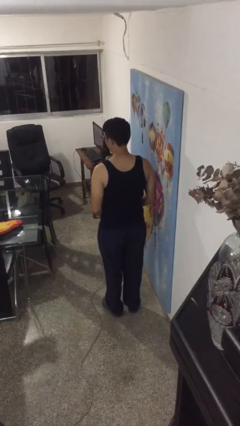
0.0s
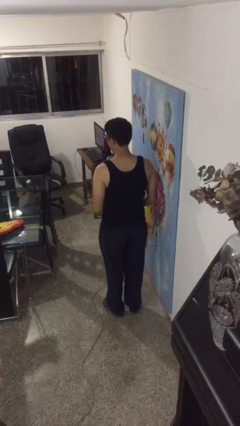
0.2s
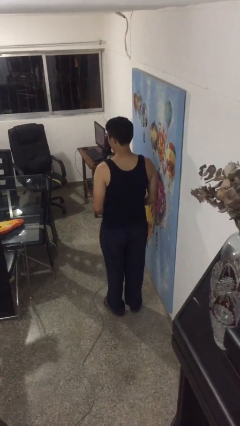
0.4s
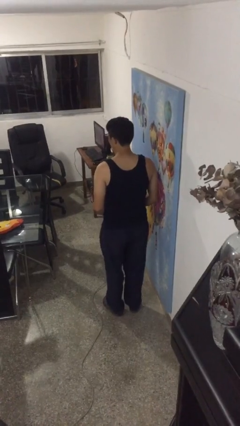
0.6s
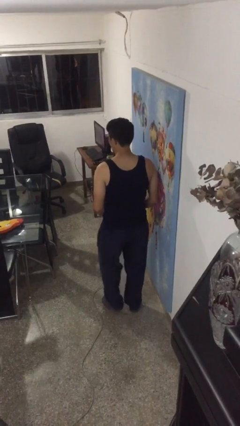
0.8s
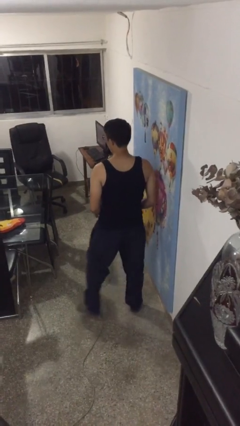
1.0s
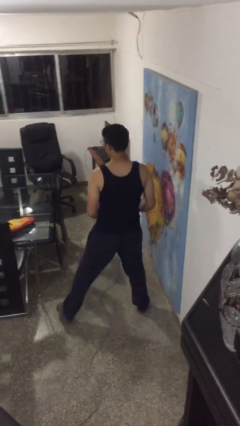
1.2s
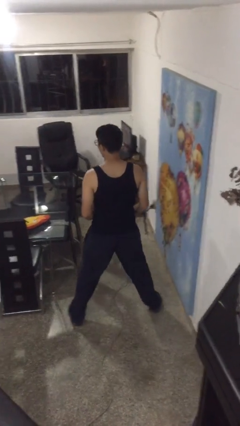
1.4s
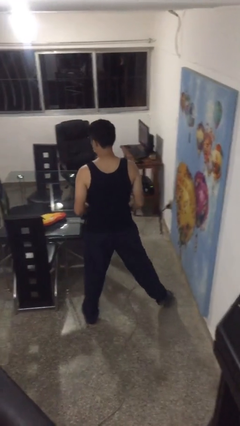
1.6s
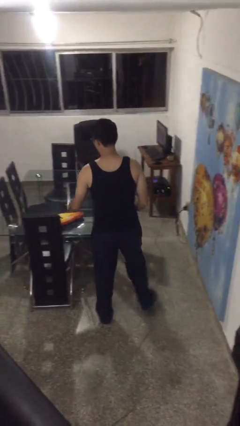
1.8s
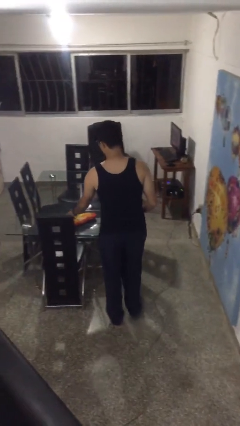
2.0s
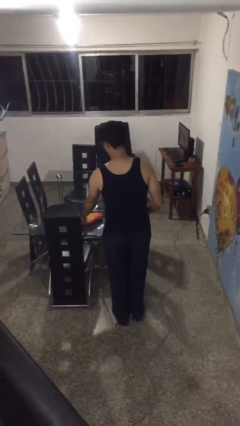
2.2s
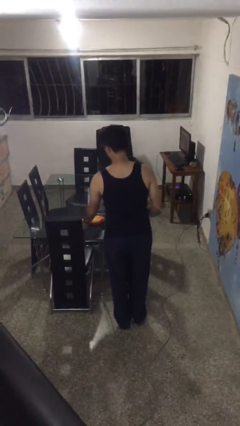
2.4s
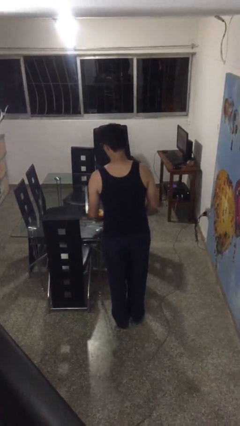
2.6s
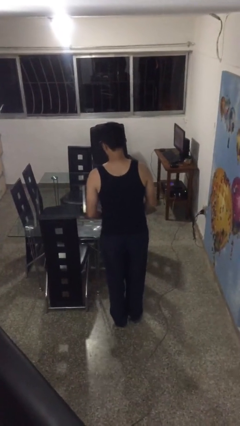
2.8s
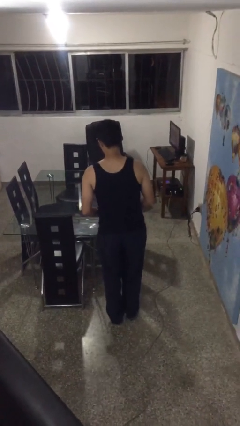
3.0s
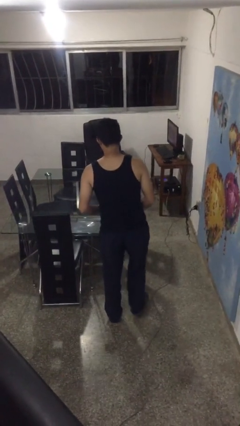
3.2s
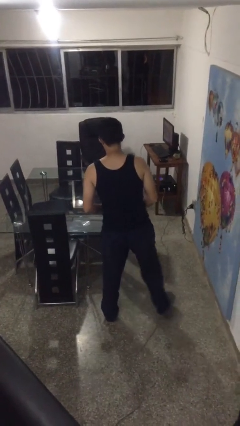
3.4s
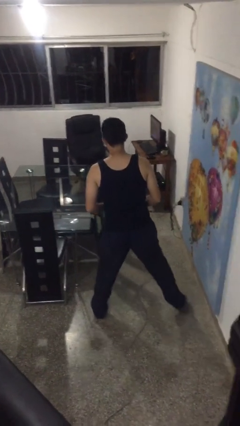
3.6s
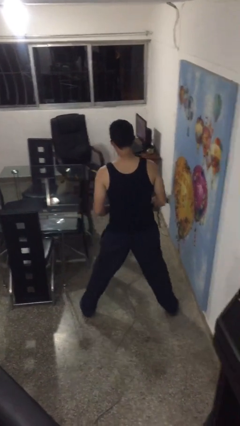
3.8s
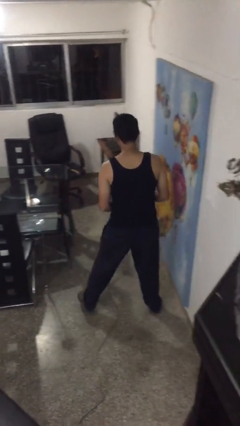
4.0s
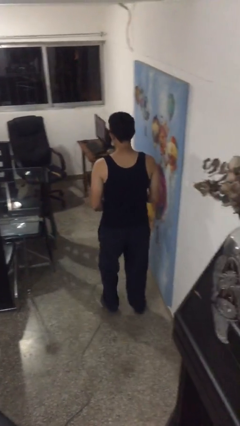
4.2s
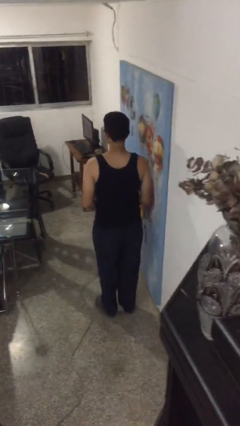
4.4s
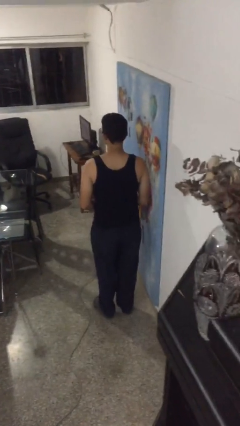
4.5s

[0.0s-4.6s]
person picks up object from table

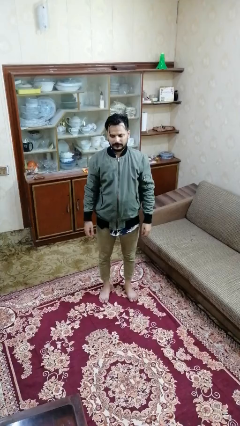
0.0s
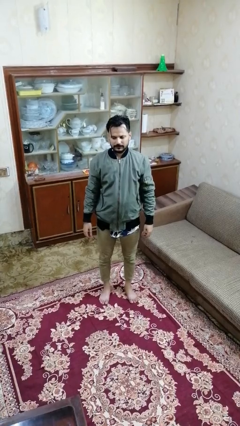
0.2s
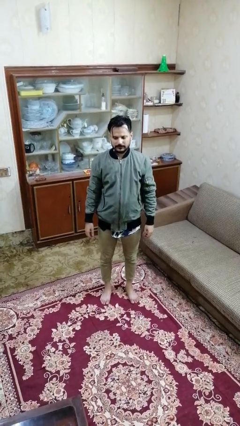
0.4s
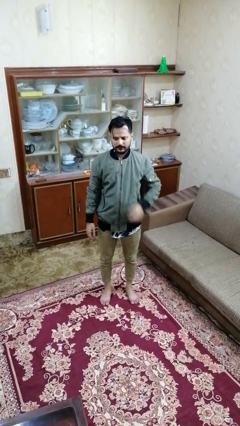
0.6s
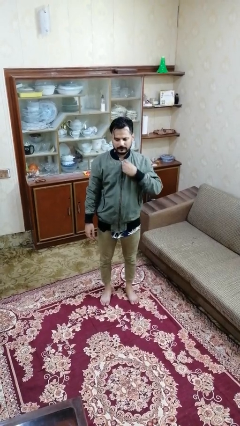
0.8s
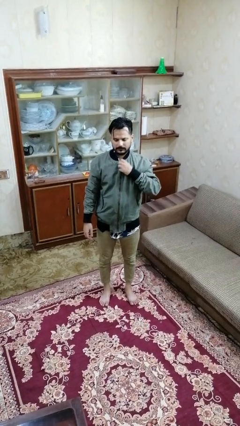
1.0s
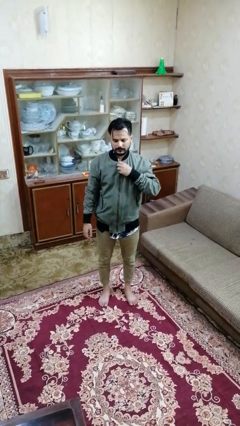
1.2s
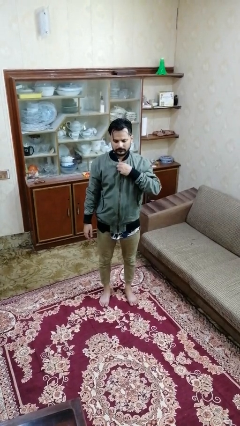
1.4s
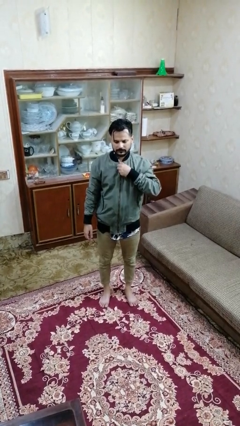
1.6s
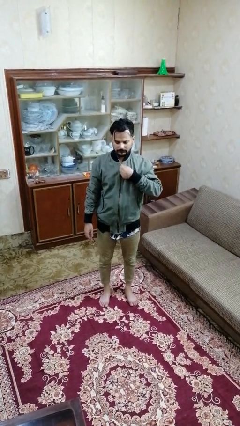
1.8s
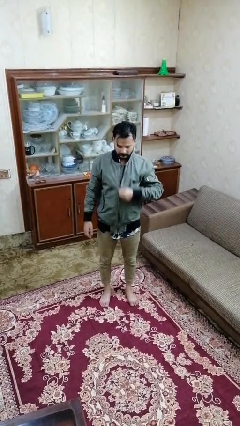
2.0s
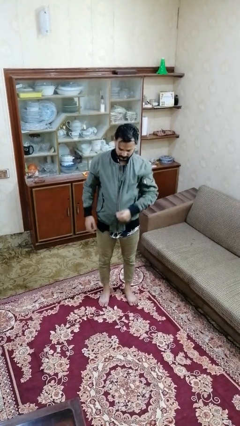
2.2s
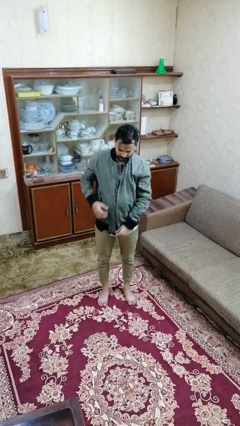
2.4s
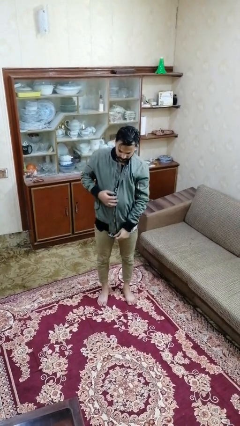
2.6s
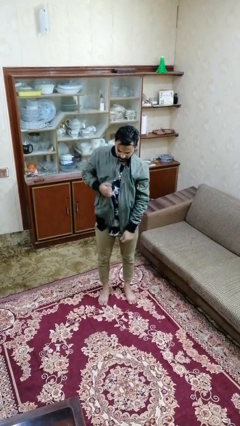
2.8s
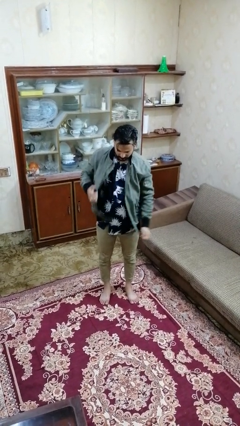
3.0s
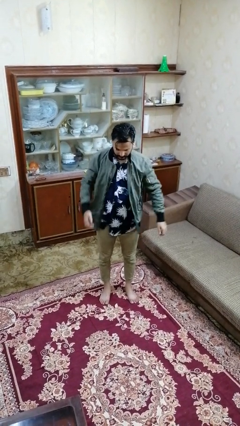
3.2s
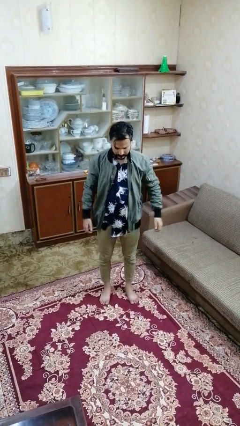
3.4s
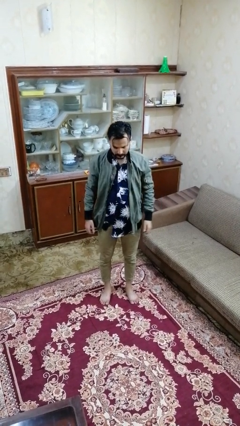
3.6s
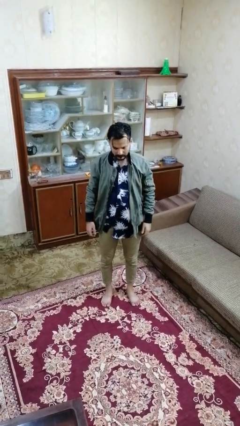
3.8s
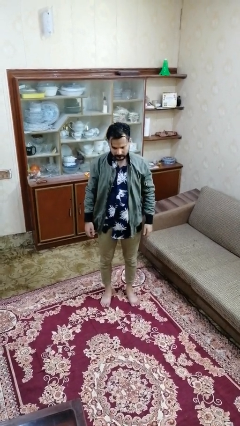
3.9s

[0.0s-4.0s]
person unzips jacket

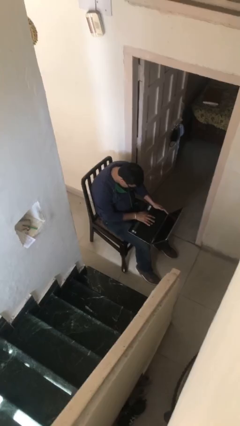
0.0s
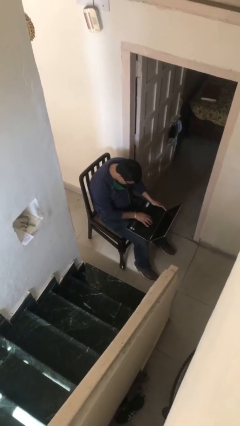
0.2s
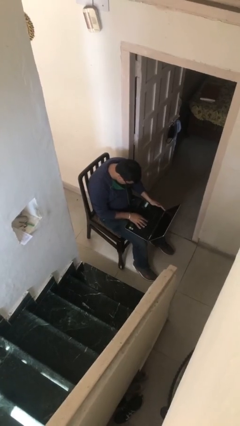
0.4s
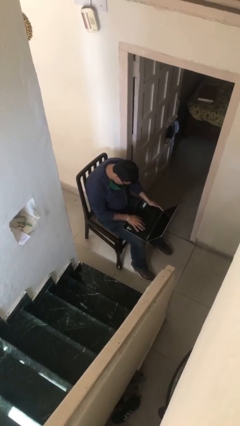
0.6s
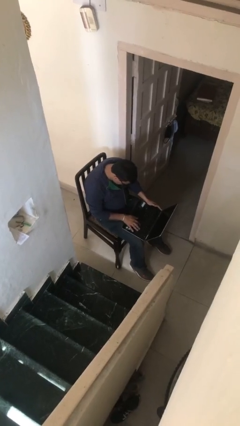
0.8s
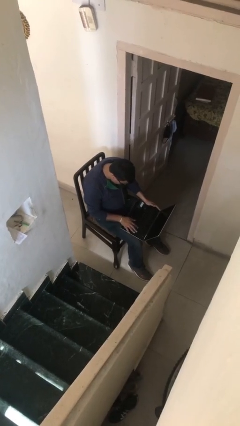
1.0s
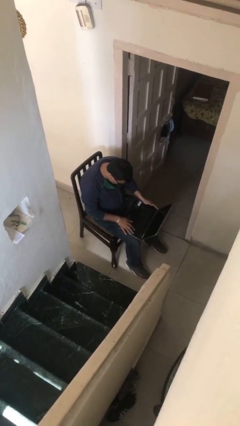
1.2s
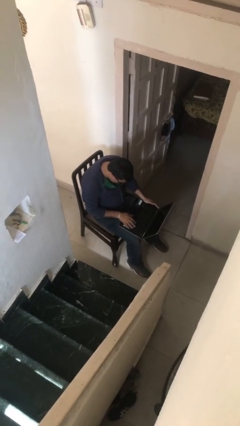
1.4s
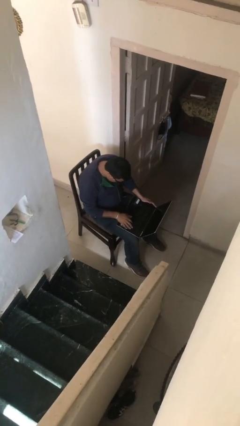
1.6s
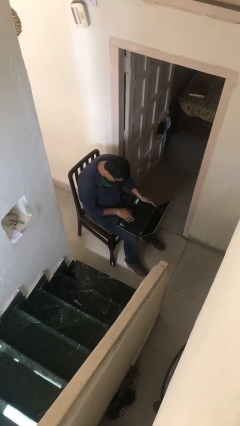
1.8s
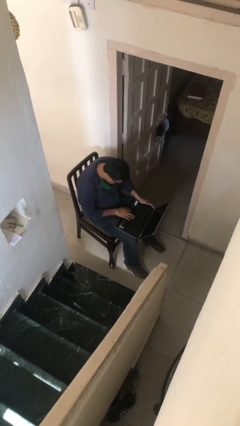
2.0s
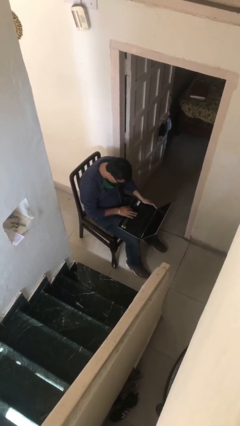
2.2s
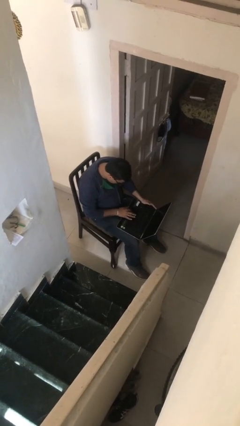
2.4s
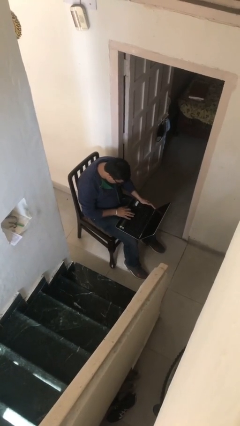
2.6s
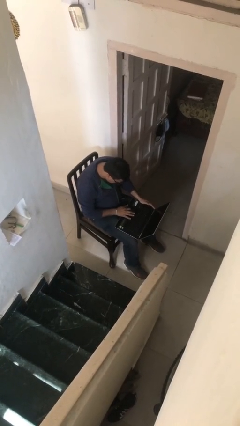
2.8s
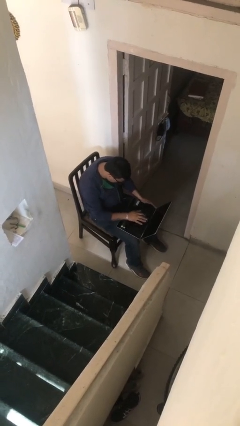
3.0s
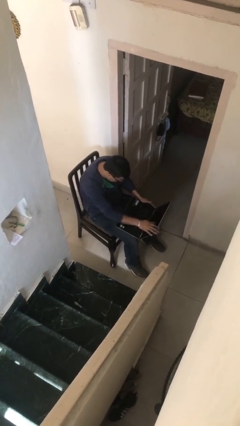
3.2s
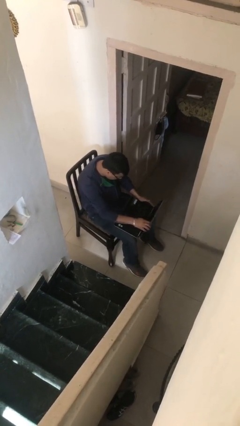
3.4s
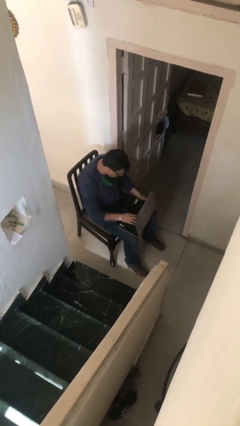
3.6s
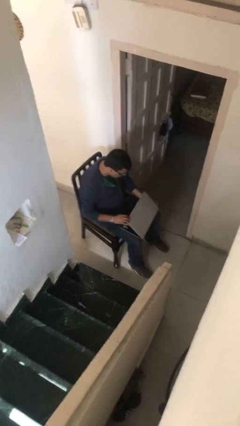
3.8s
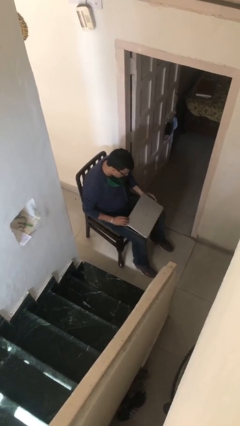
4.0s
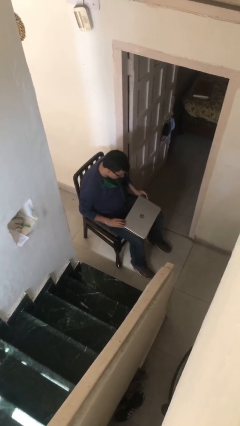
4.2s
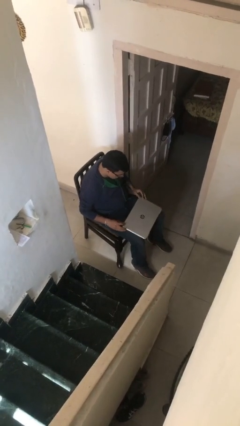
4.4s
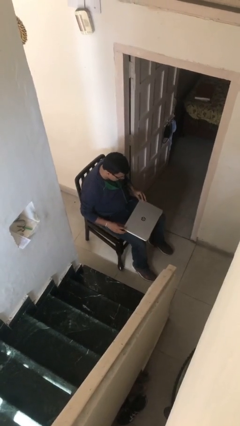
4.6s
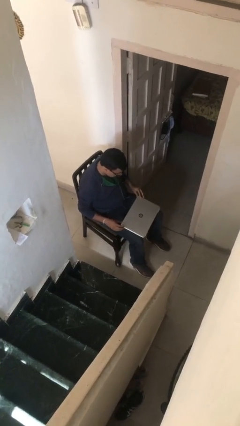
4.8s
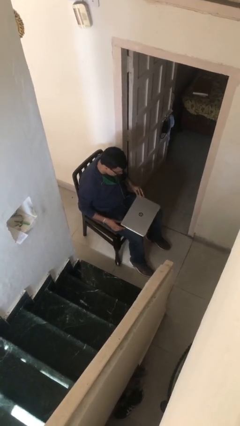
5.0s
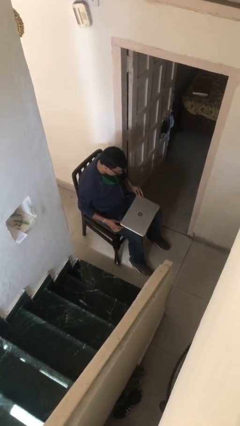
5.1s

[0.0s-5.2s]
person interacts with laptop

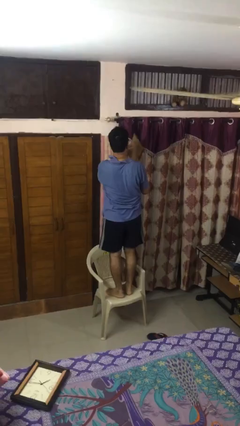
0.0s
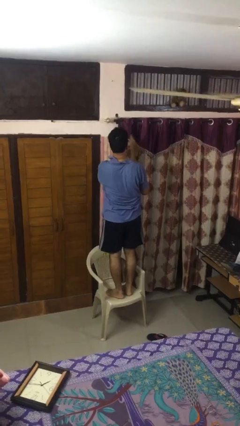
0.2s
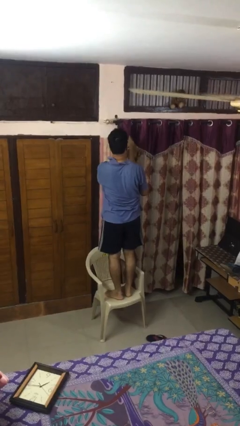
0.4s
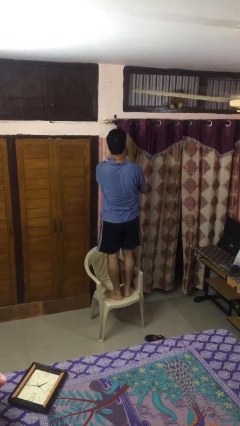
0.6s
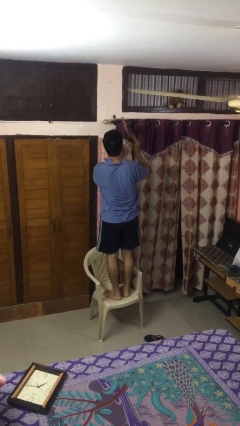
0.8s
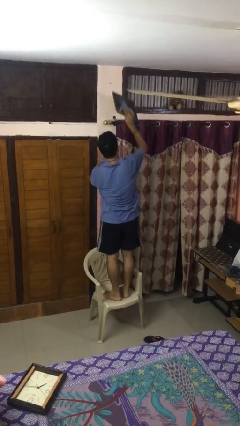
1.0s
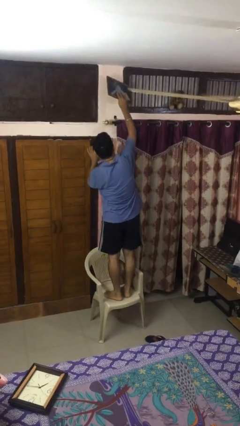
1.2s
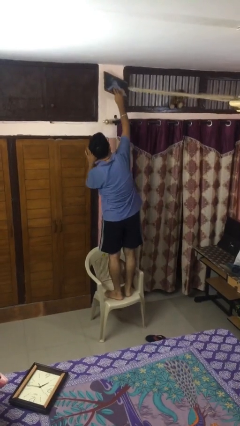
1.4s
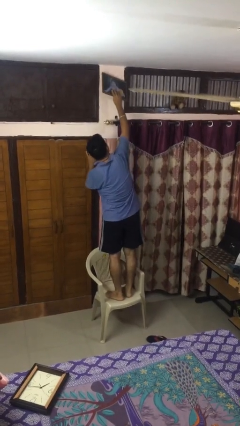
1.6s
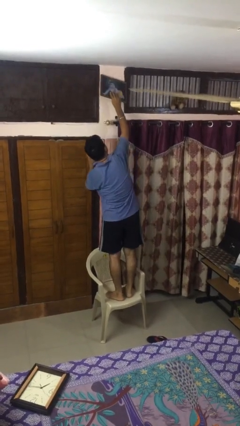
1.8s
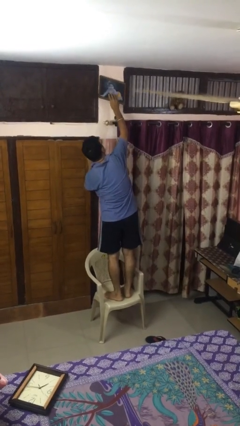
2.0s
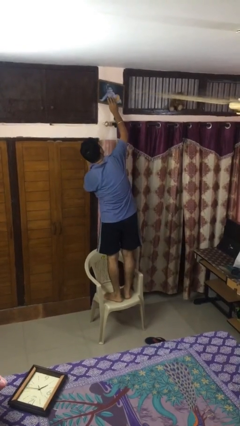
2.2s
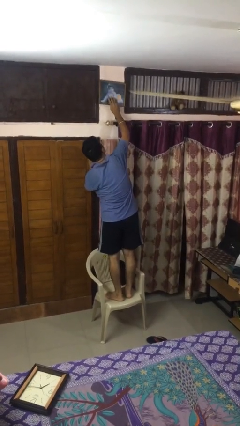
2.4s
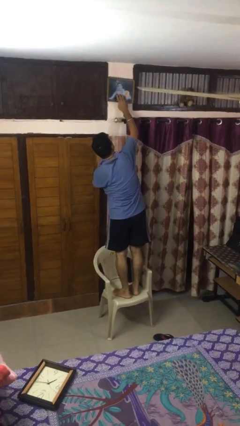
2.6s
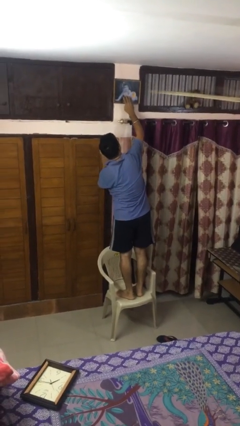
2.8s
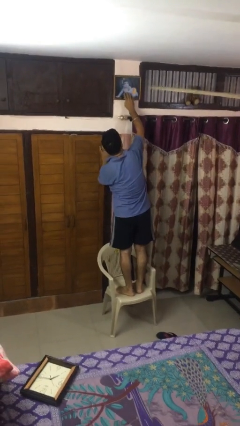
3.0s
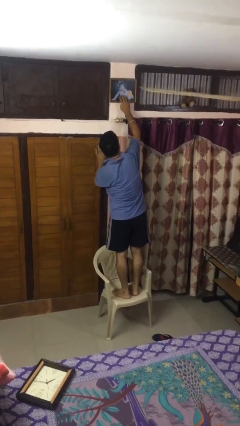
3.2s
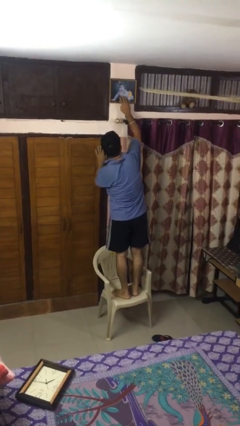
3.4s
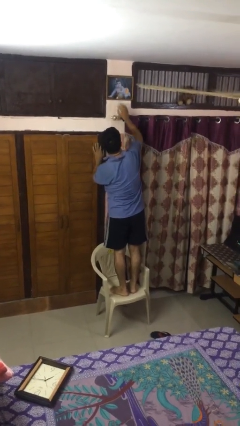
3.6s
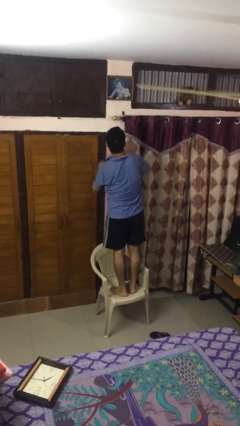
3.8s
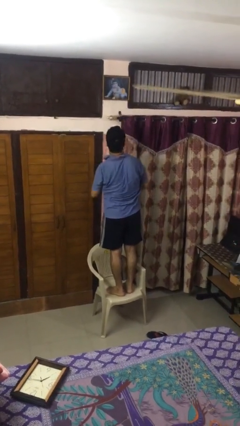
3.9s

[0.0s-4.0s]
person puts up picture frame

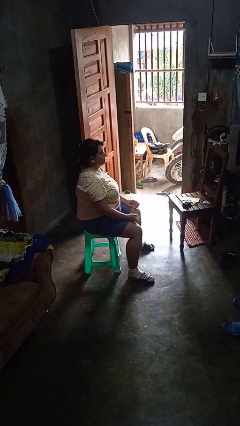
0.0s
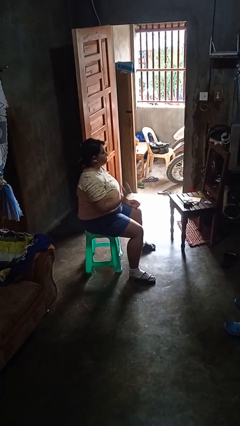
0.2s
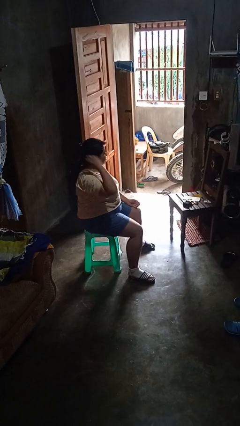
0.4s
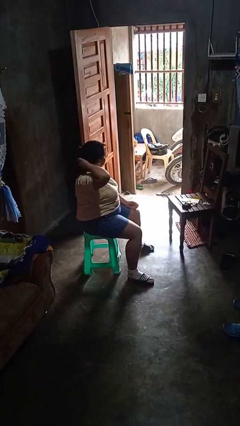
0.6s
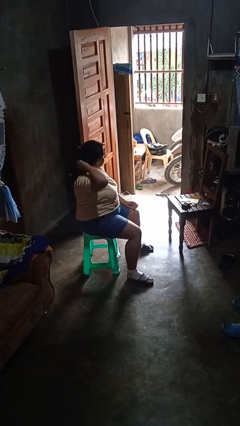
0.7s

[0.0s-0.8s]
person takes off hairtie
